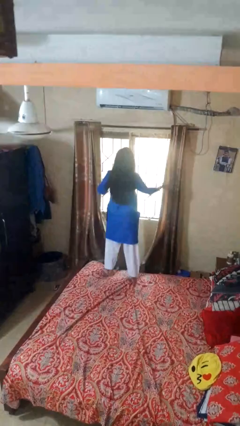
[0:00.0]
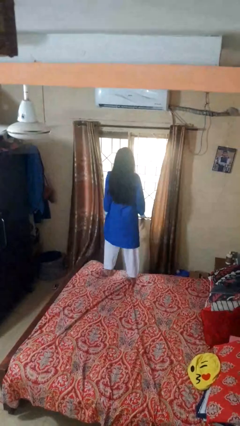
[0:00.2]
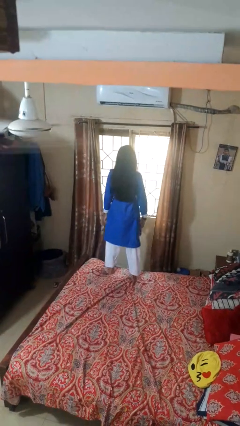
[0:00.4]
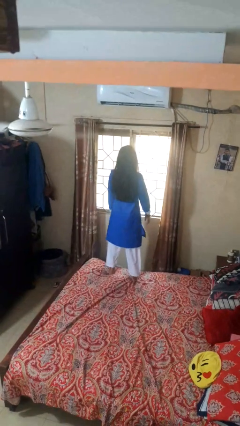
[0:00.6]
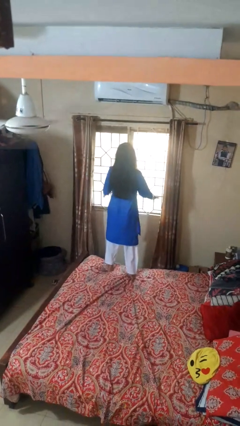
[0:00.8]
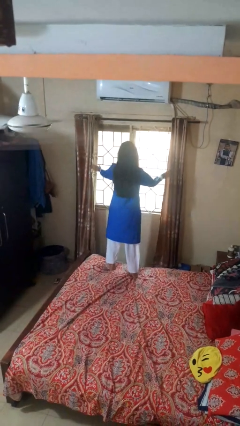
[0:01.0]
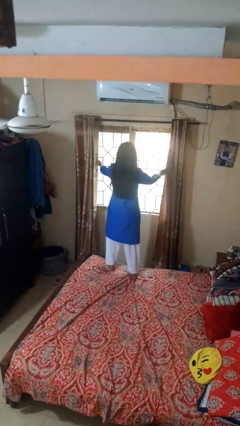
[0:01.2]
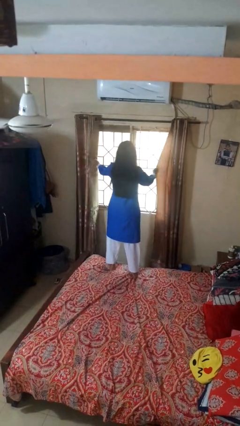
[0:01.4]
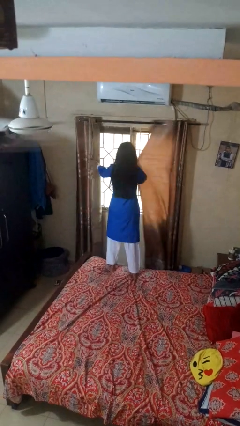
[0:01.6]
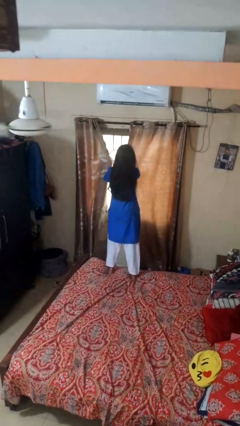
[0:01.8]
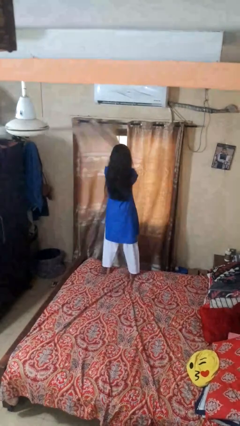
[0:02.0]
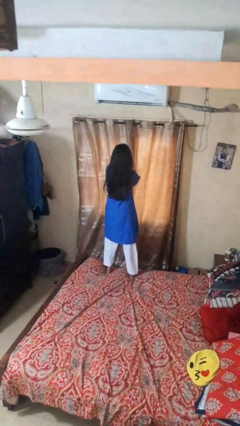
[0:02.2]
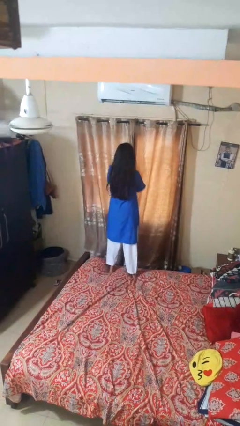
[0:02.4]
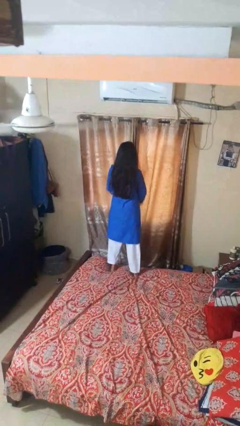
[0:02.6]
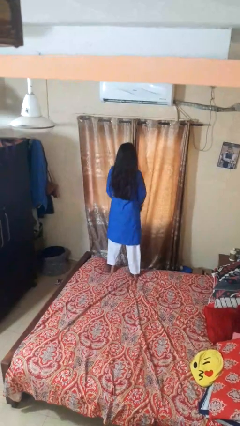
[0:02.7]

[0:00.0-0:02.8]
person closes curtains

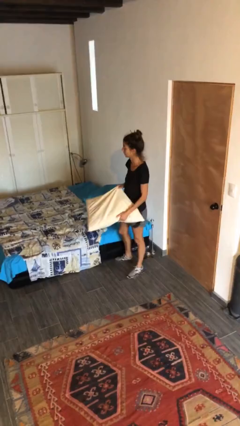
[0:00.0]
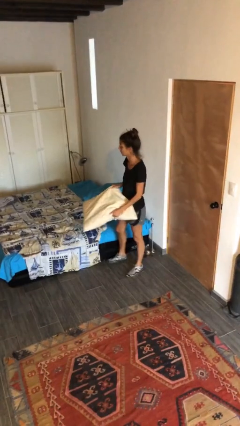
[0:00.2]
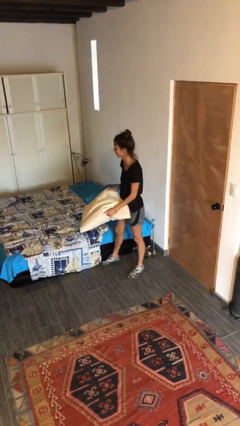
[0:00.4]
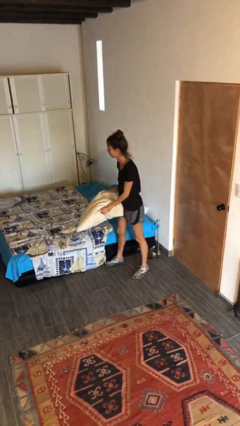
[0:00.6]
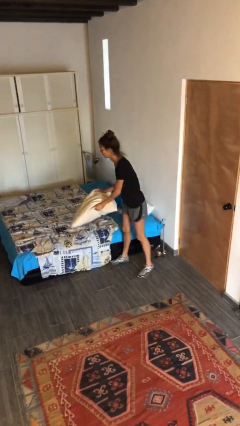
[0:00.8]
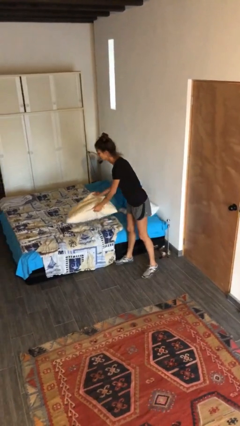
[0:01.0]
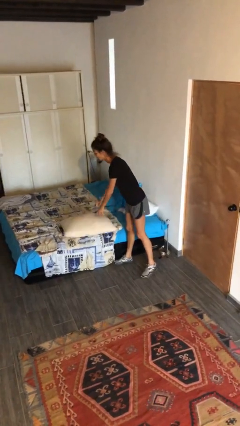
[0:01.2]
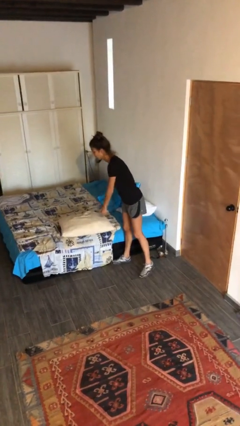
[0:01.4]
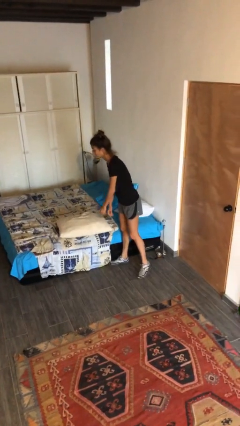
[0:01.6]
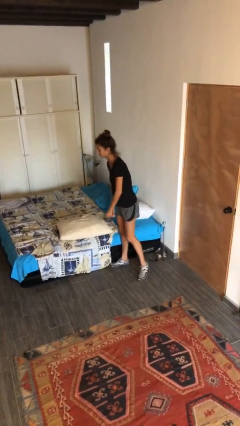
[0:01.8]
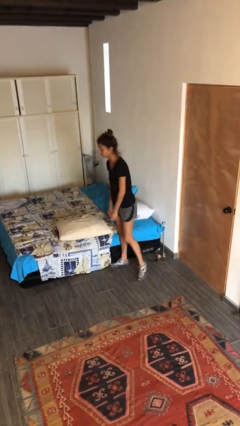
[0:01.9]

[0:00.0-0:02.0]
person puts down object on bed

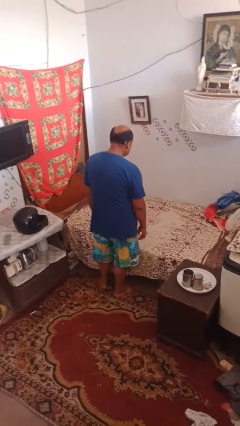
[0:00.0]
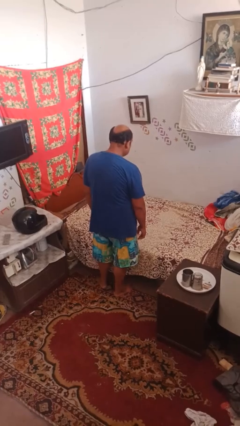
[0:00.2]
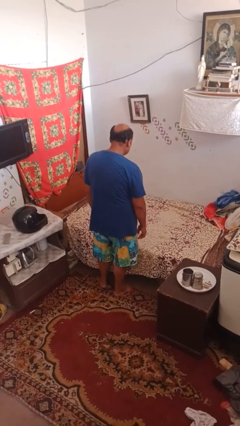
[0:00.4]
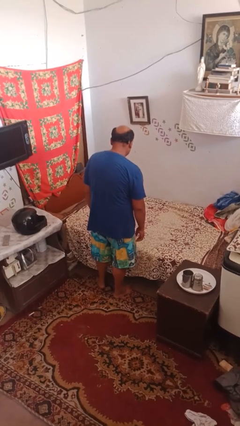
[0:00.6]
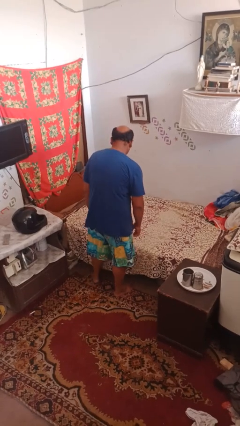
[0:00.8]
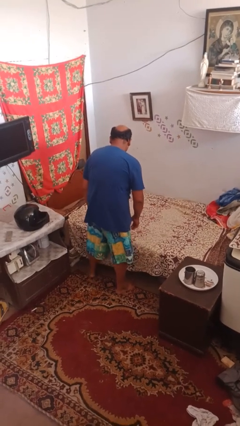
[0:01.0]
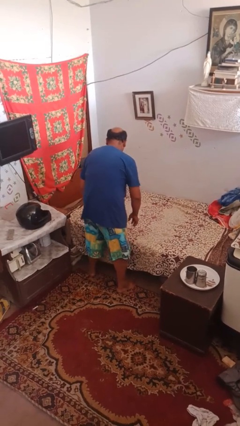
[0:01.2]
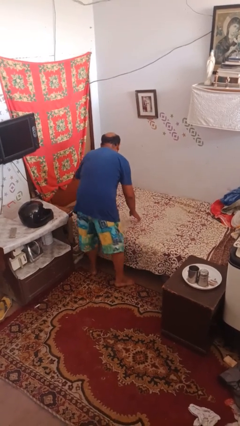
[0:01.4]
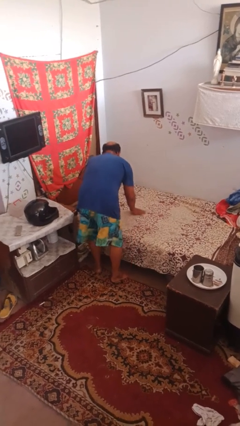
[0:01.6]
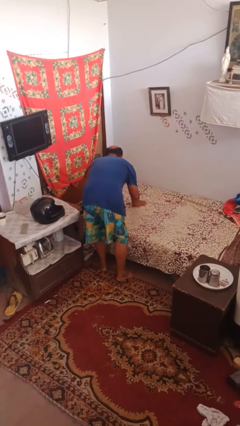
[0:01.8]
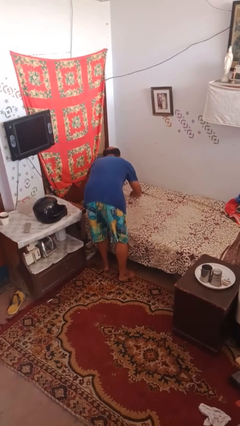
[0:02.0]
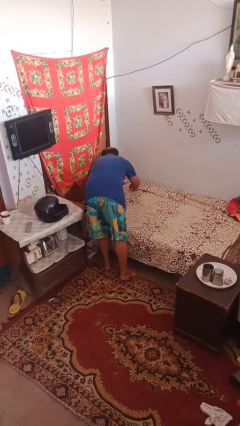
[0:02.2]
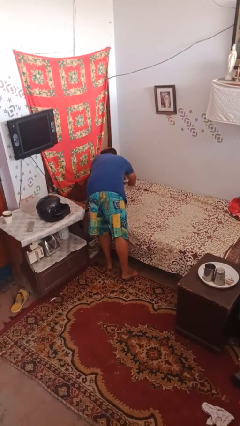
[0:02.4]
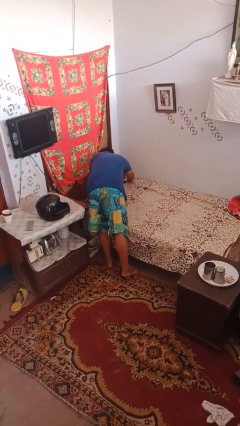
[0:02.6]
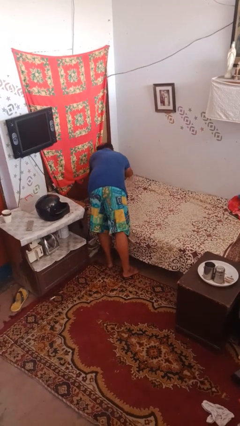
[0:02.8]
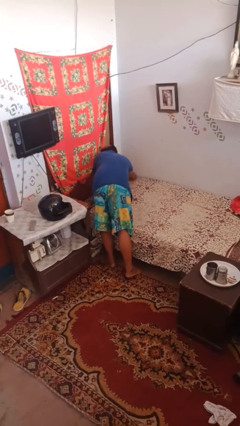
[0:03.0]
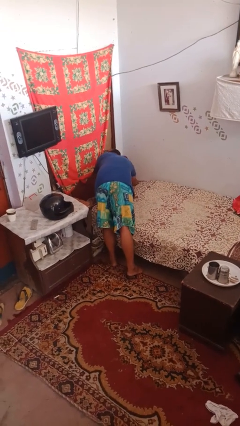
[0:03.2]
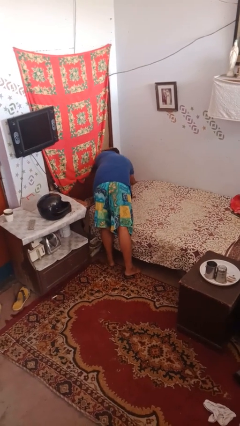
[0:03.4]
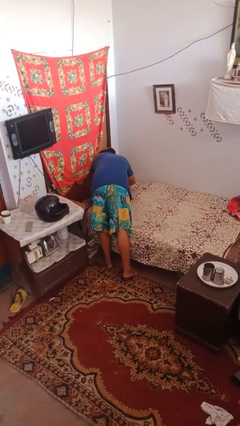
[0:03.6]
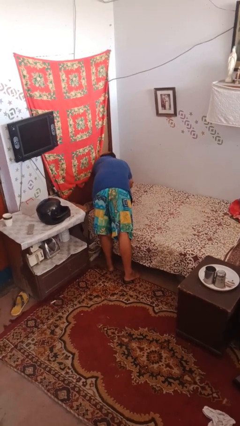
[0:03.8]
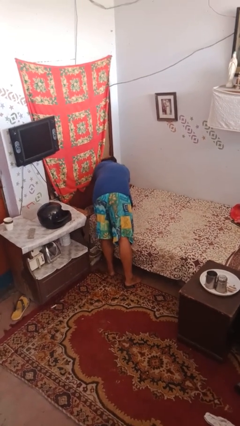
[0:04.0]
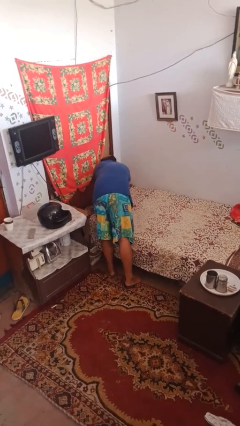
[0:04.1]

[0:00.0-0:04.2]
person makes bed

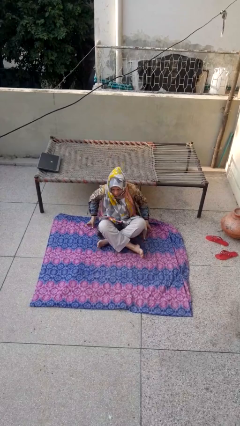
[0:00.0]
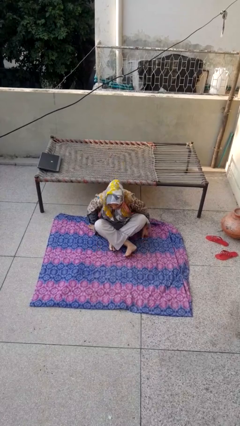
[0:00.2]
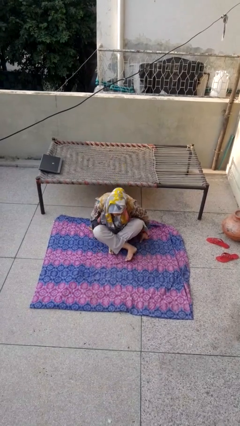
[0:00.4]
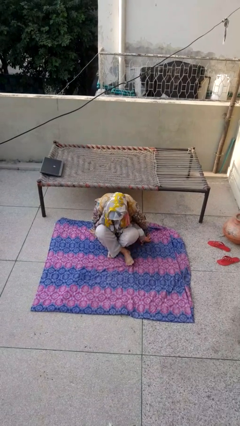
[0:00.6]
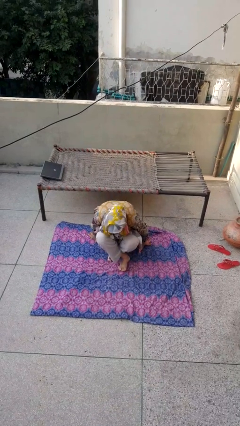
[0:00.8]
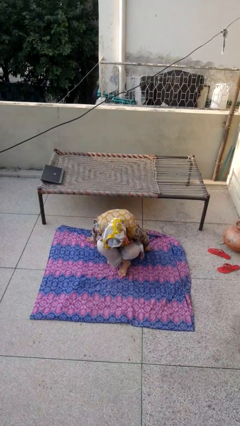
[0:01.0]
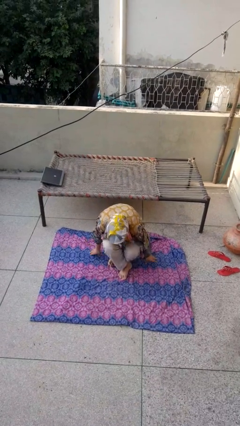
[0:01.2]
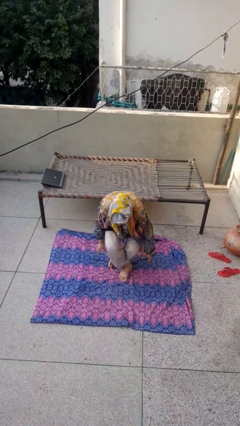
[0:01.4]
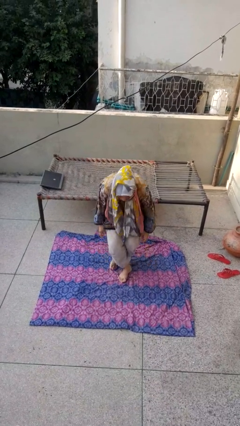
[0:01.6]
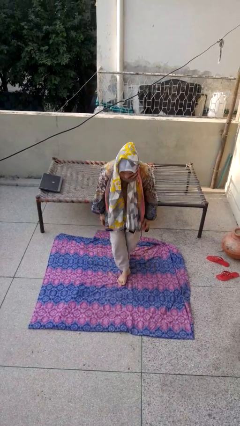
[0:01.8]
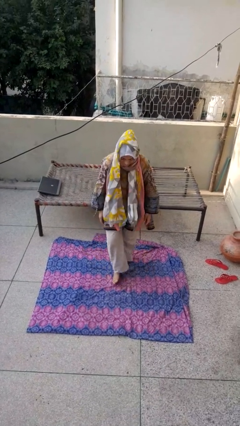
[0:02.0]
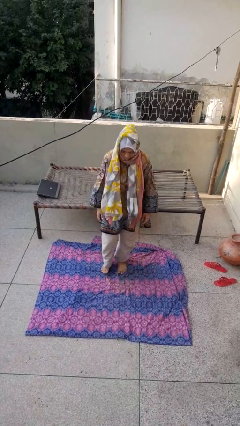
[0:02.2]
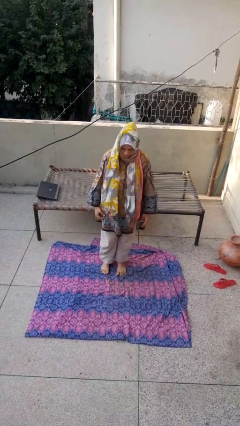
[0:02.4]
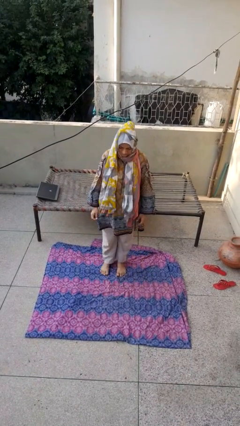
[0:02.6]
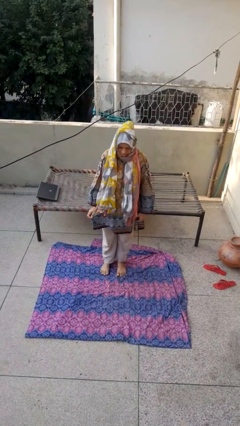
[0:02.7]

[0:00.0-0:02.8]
person stands up from floor

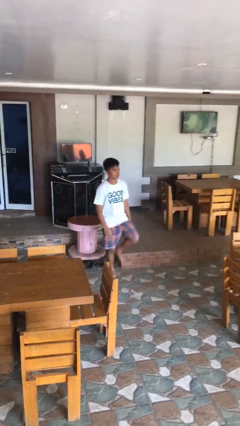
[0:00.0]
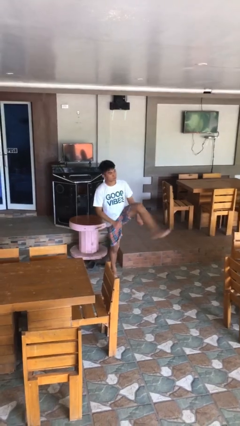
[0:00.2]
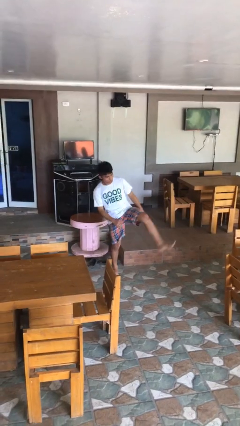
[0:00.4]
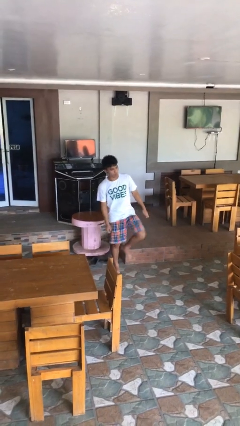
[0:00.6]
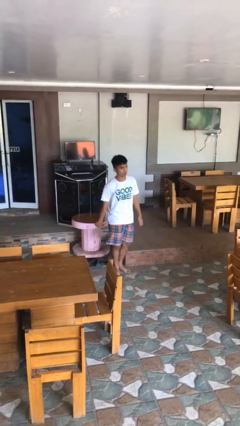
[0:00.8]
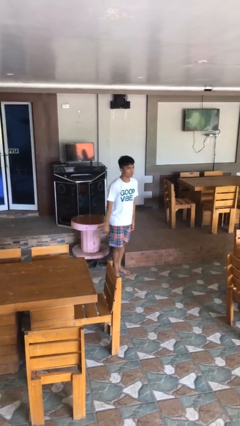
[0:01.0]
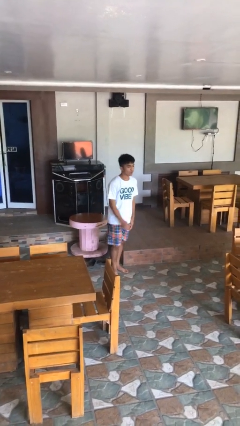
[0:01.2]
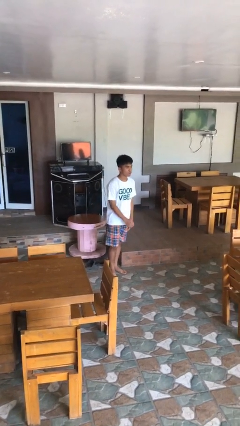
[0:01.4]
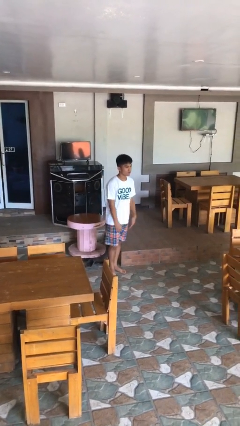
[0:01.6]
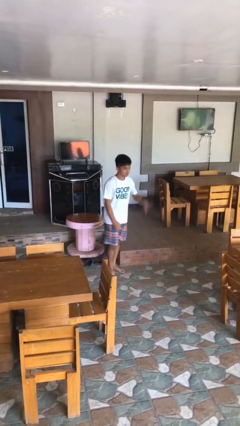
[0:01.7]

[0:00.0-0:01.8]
person karate kicks

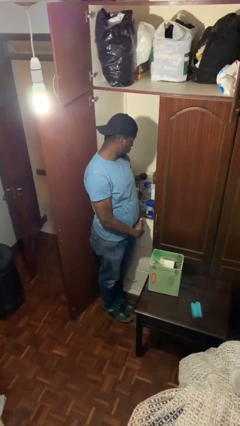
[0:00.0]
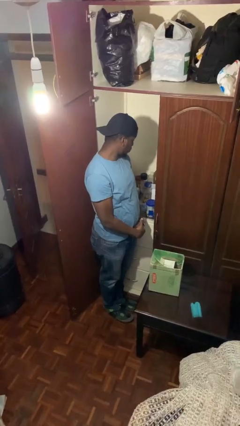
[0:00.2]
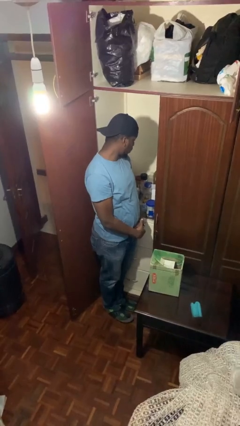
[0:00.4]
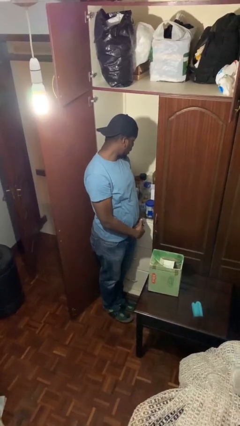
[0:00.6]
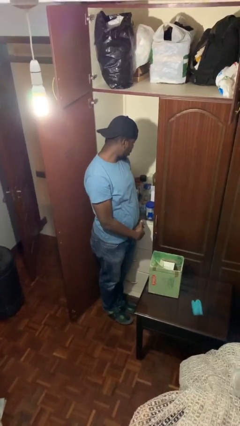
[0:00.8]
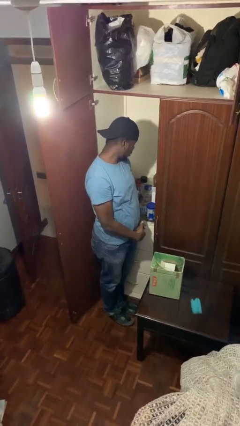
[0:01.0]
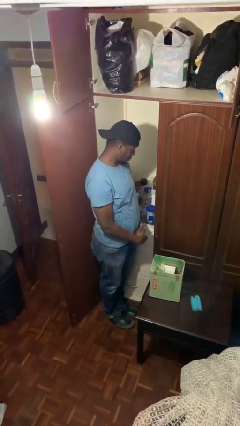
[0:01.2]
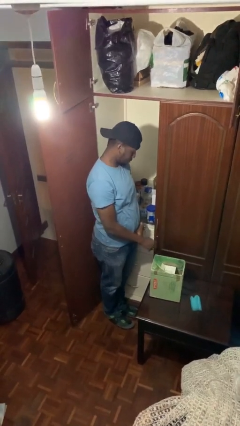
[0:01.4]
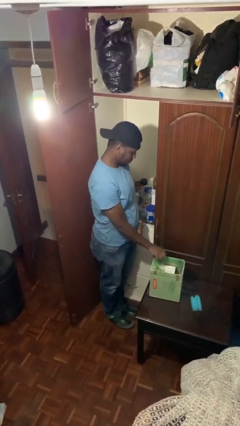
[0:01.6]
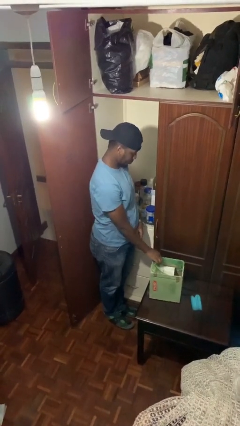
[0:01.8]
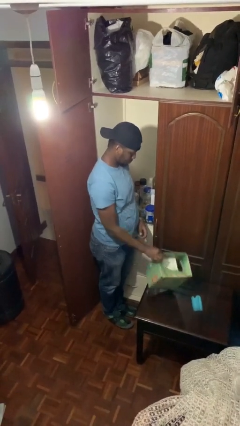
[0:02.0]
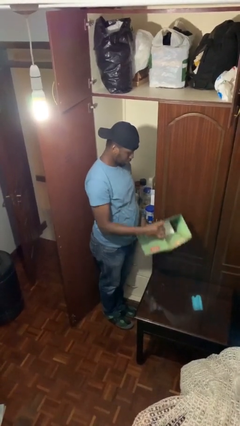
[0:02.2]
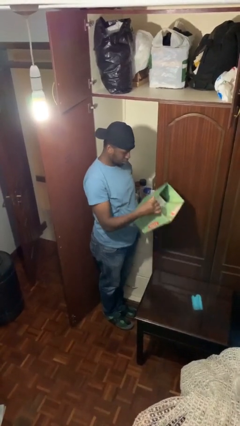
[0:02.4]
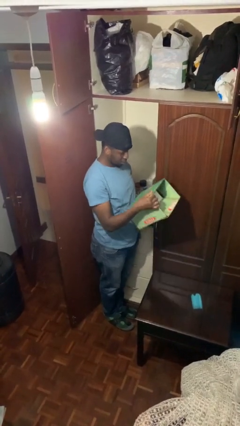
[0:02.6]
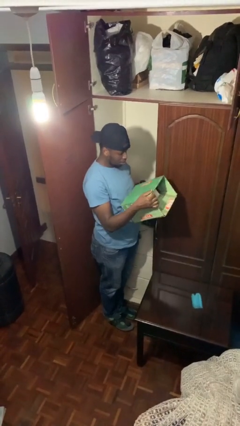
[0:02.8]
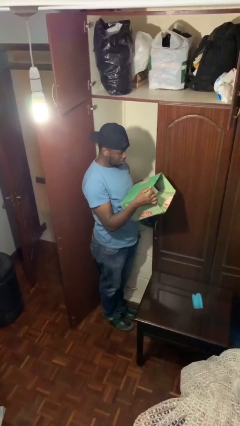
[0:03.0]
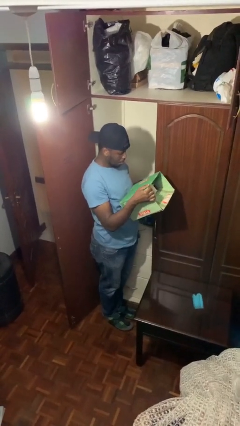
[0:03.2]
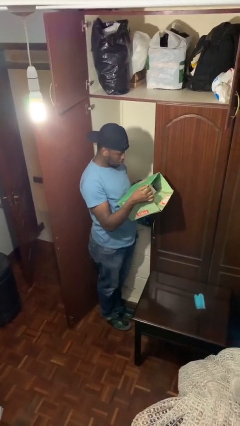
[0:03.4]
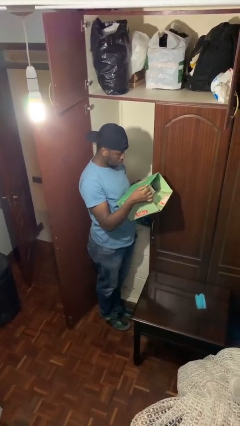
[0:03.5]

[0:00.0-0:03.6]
person picks up object from table
